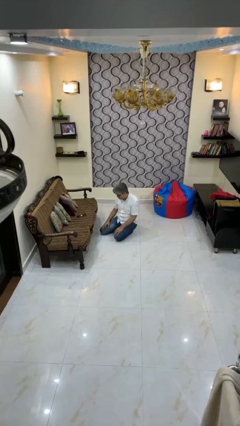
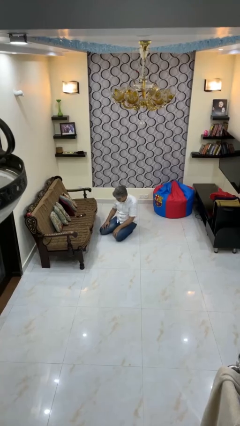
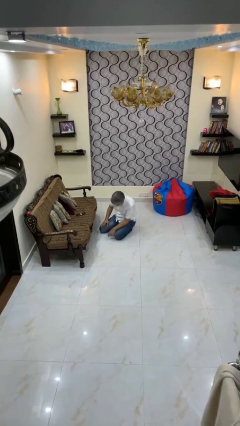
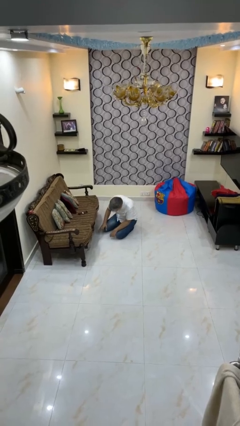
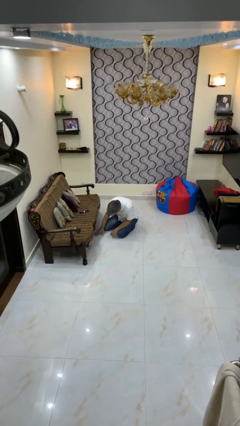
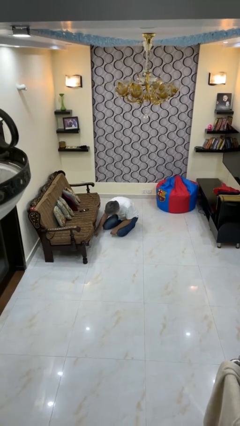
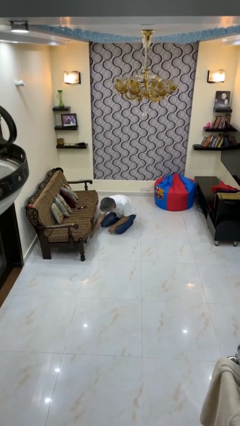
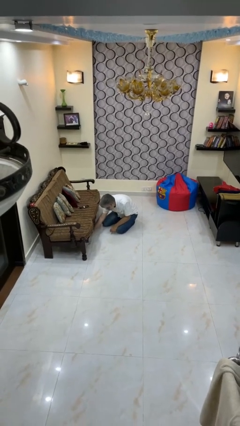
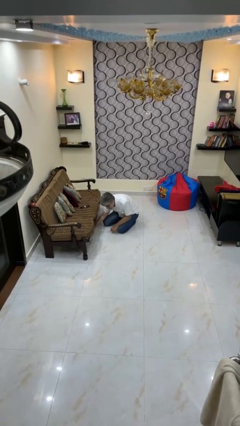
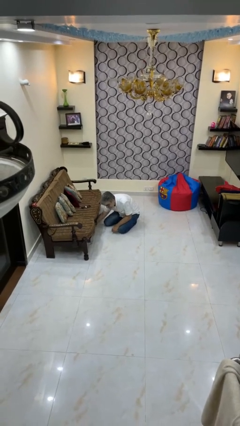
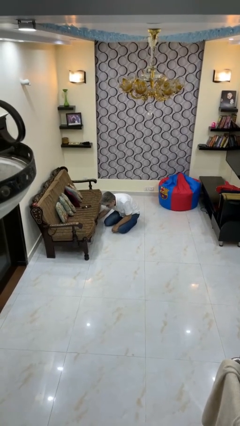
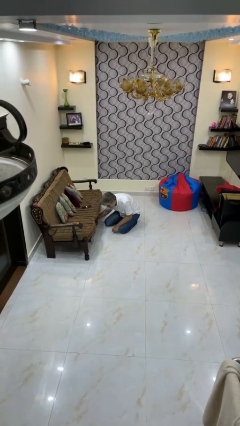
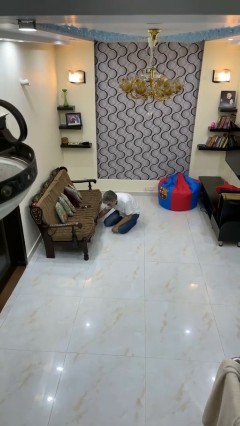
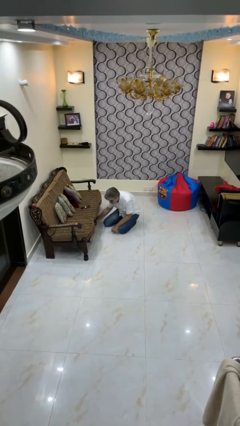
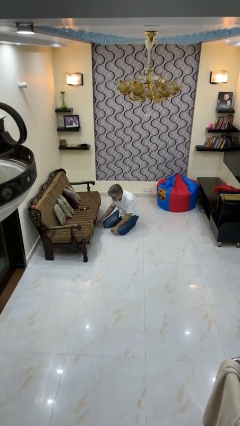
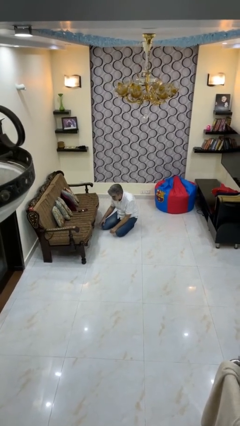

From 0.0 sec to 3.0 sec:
person searches under couch

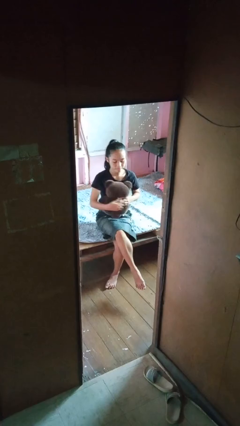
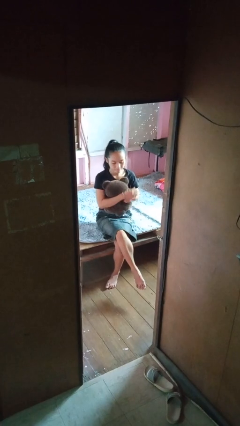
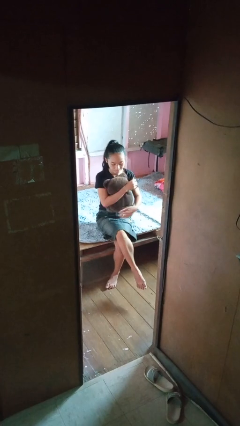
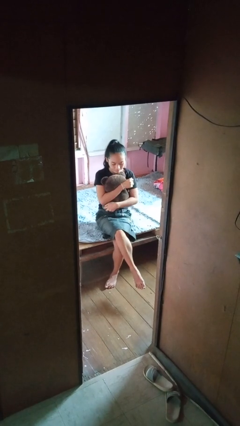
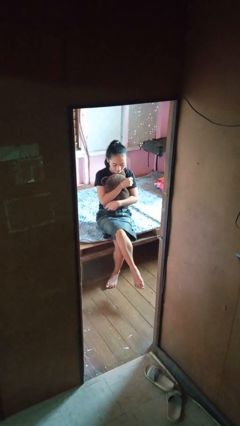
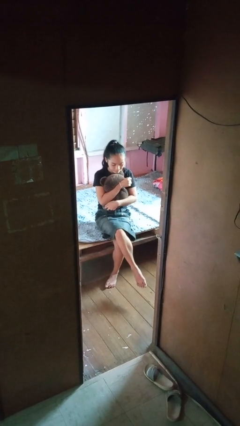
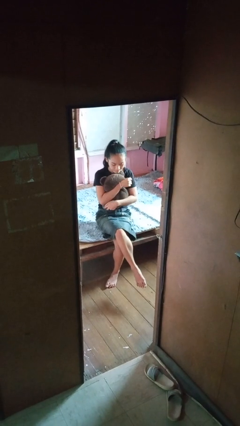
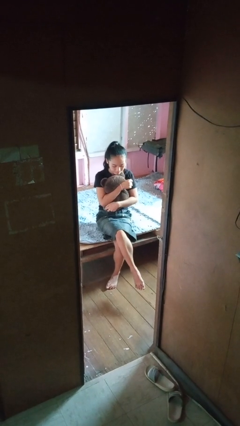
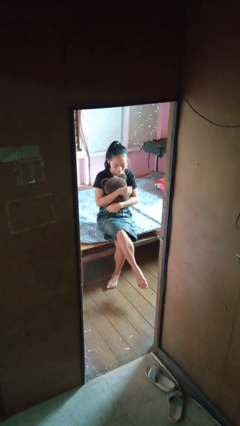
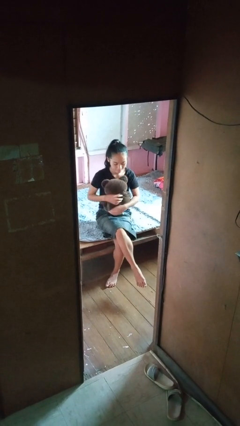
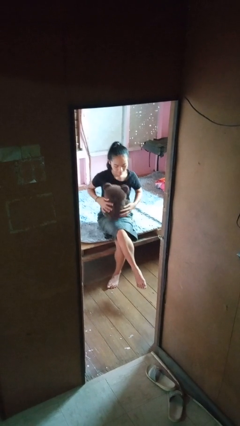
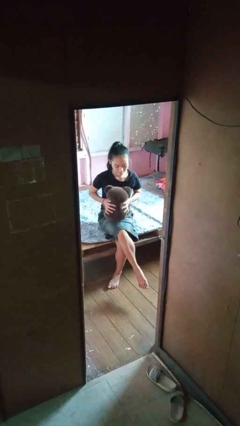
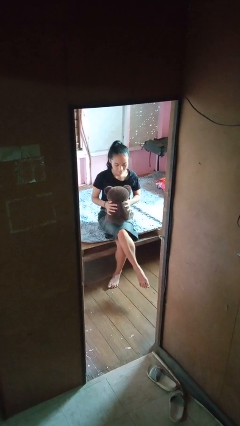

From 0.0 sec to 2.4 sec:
person hugs stuffed animal

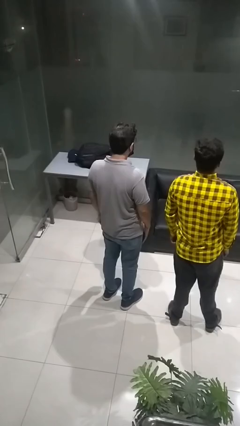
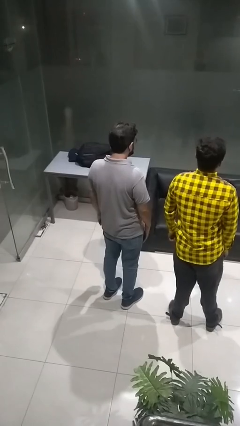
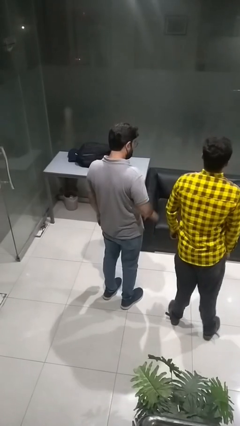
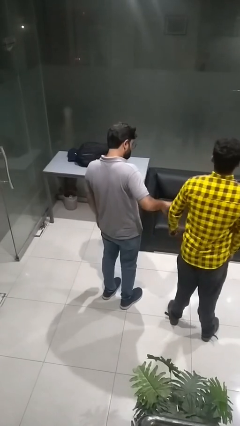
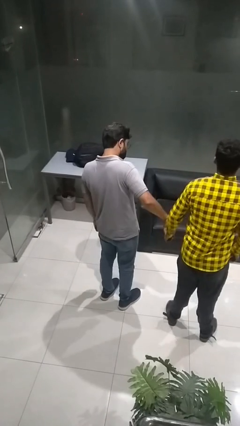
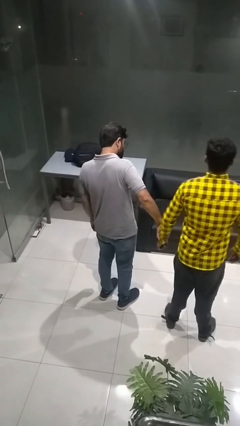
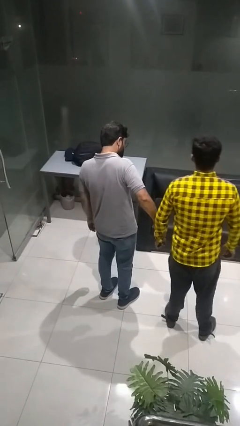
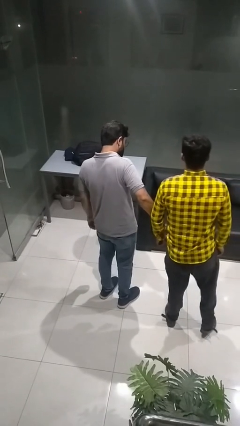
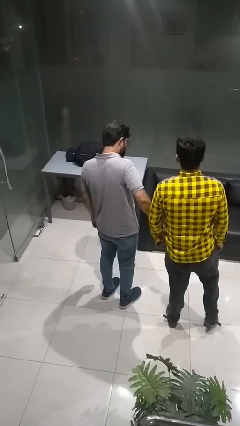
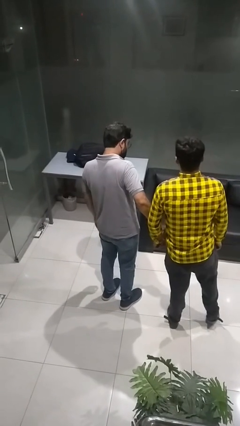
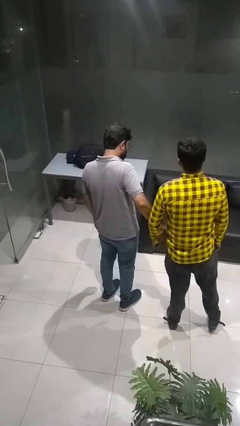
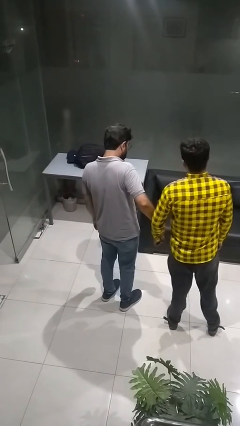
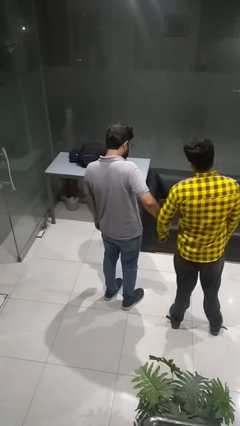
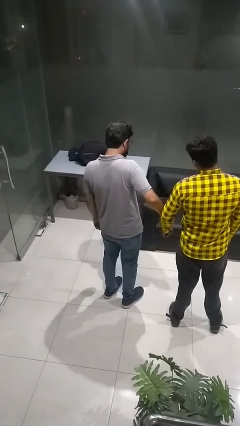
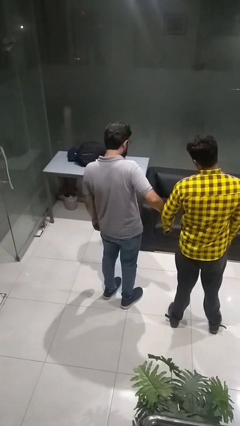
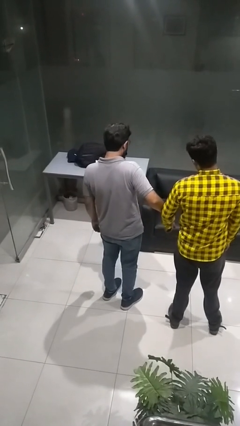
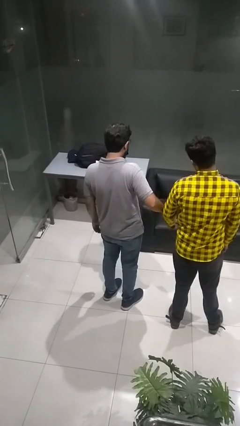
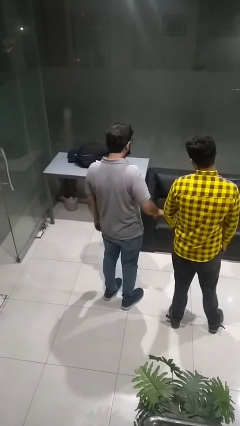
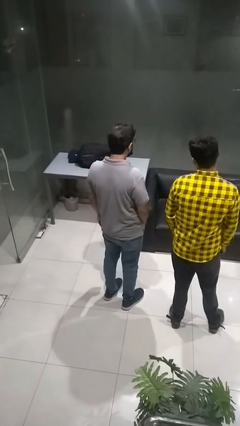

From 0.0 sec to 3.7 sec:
person grabs person by forearm

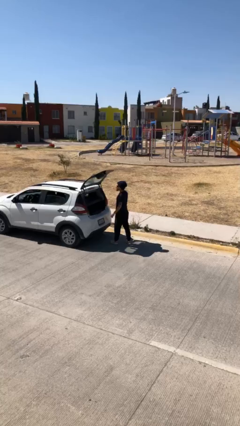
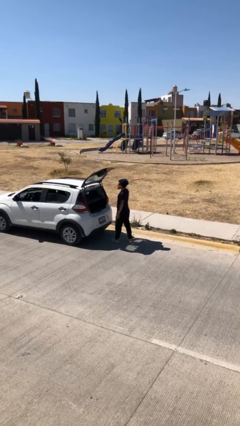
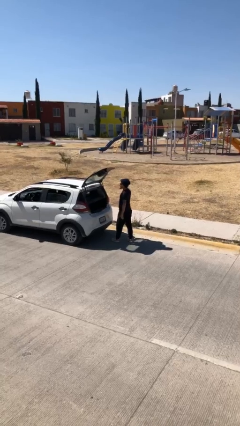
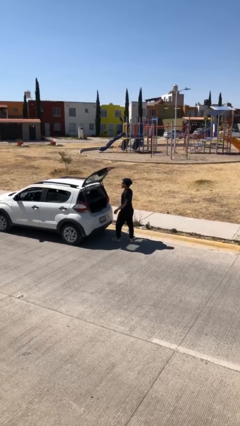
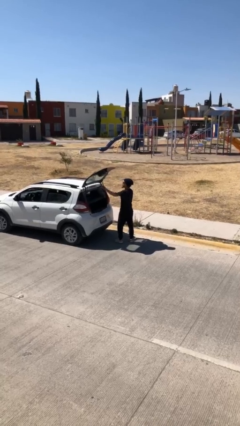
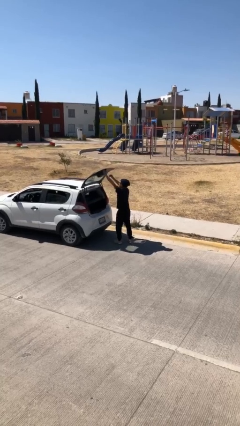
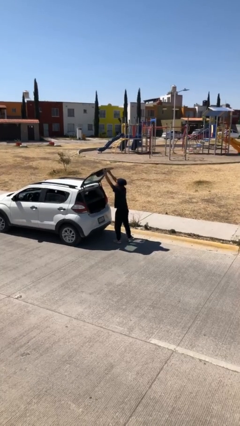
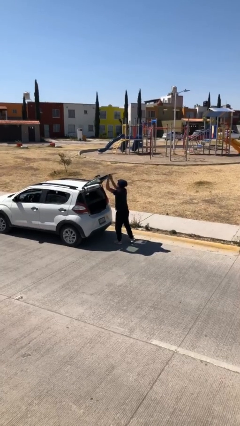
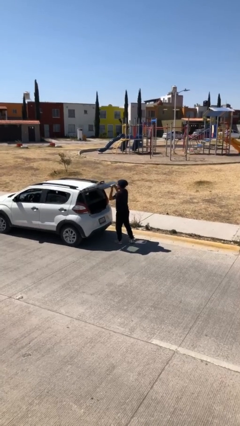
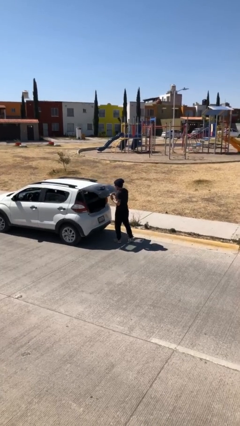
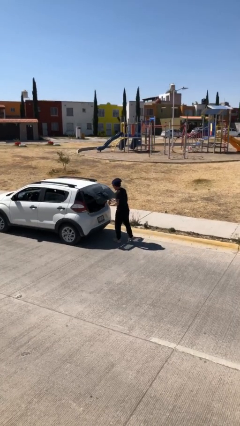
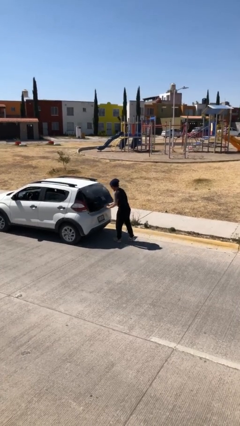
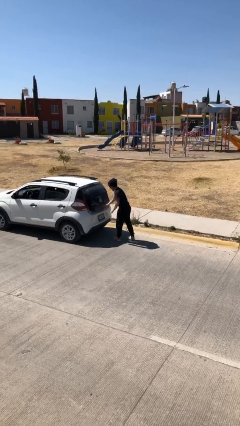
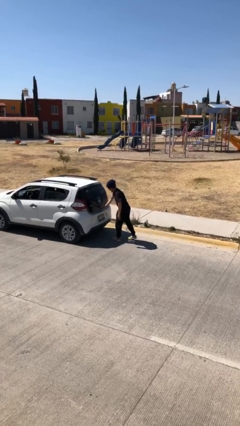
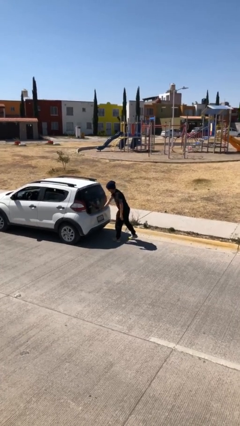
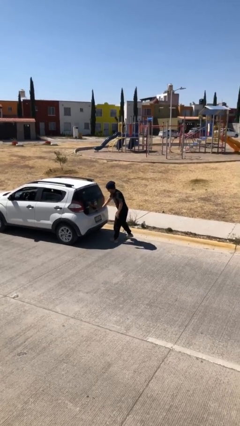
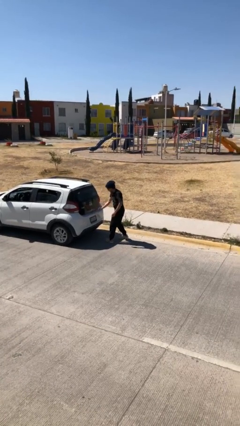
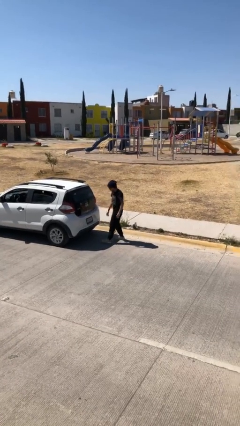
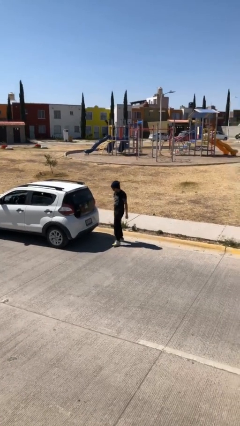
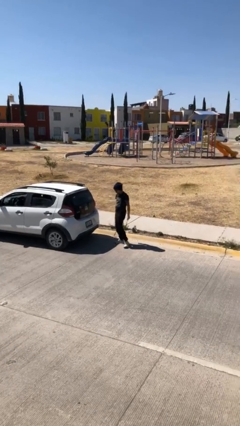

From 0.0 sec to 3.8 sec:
person closes car trunk

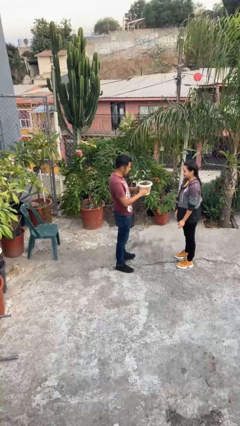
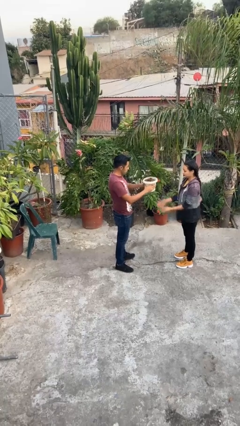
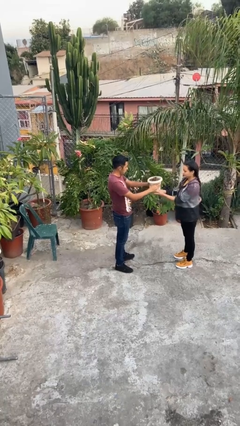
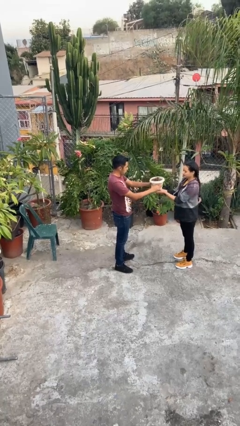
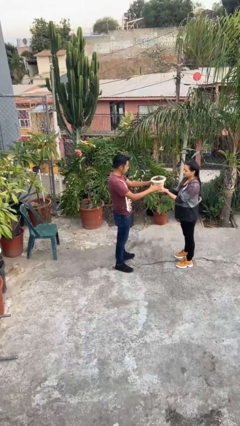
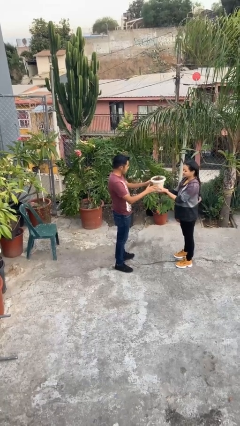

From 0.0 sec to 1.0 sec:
person transfers object to person

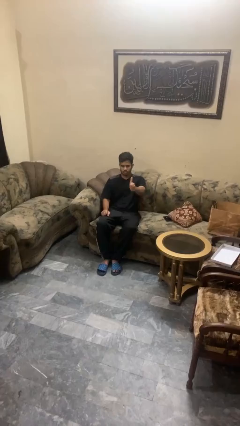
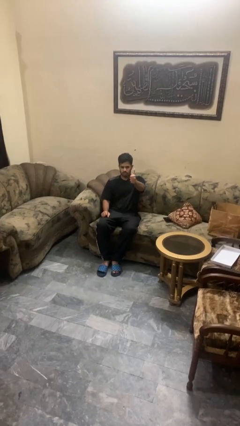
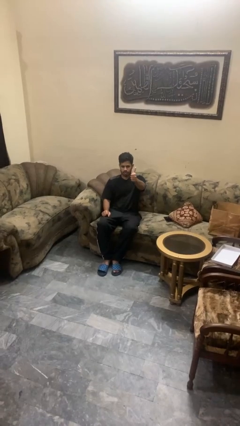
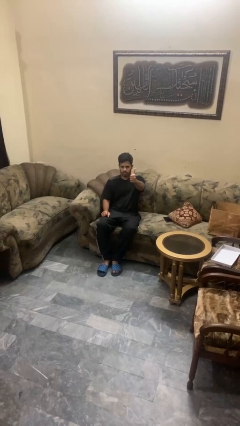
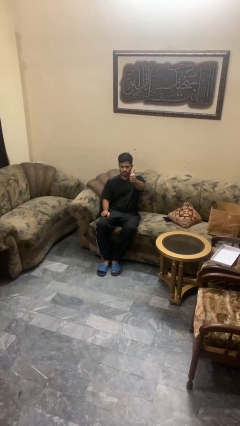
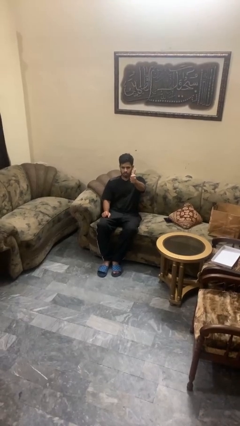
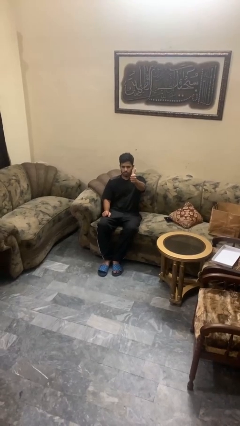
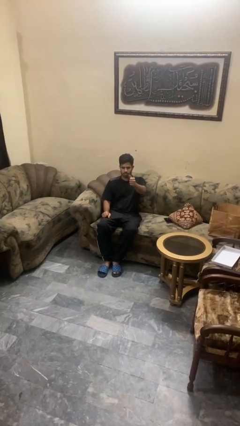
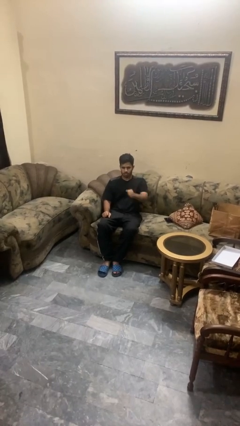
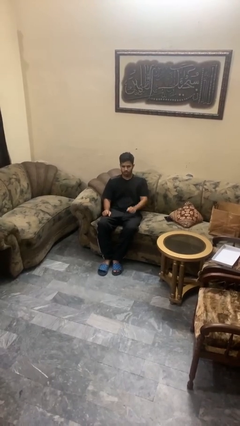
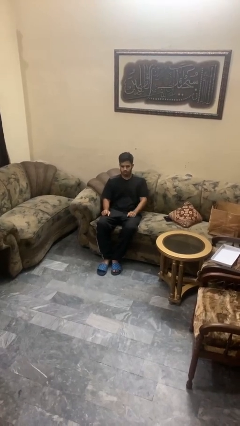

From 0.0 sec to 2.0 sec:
person gestures thumbs up

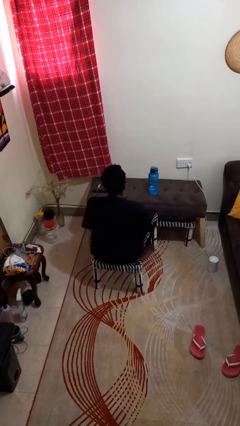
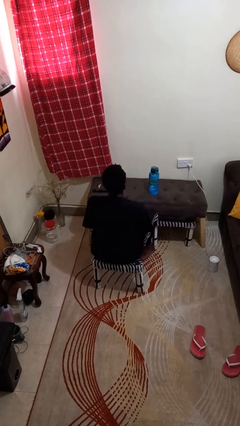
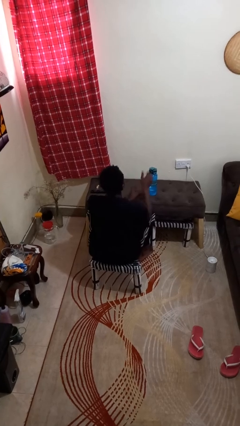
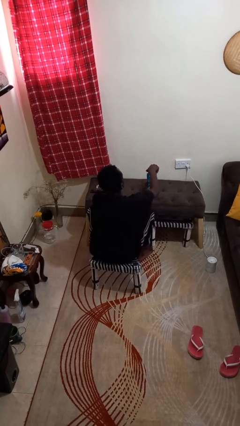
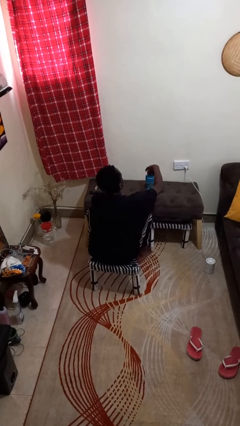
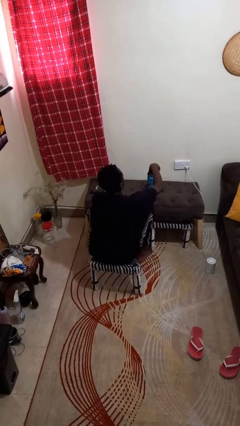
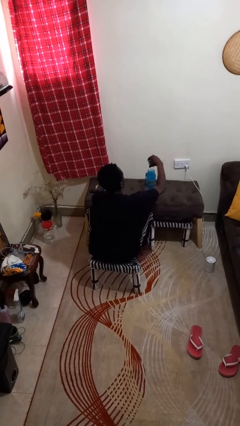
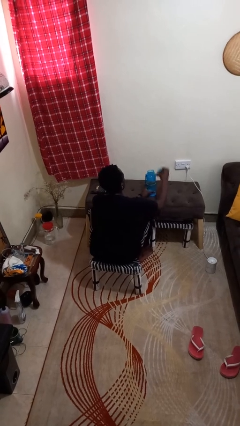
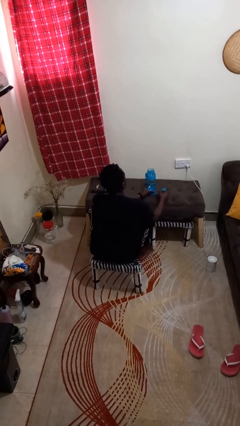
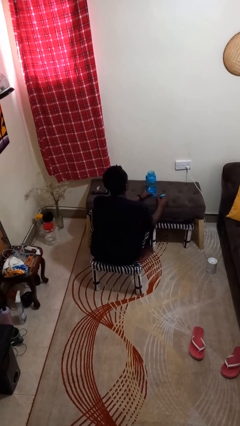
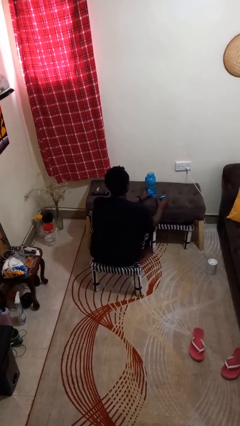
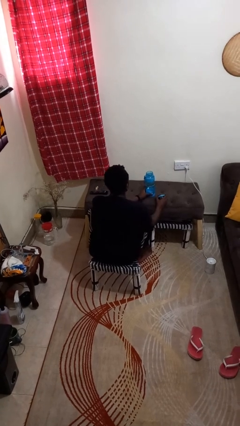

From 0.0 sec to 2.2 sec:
person opens jar
